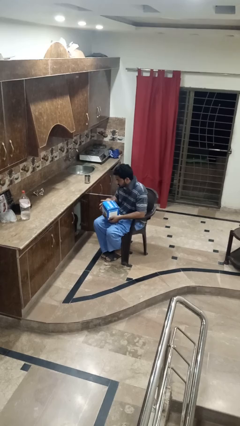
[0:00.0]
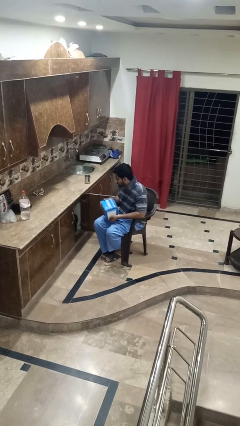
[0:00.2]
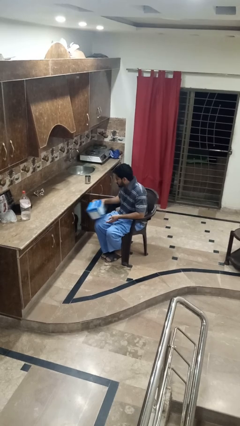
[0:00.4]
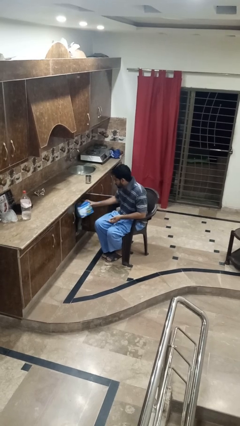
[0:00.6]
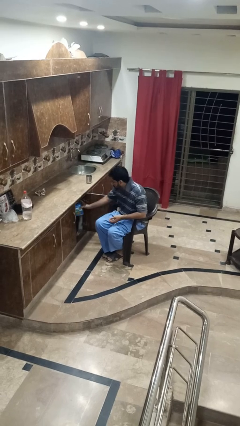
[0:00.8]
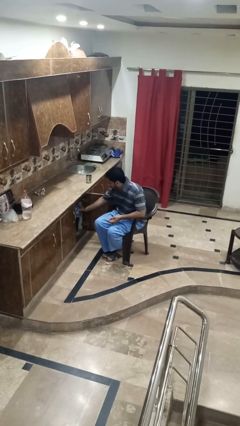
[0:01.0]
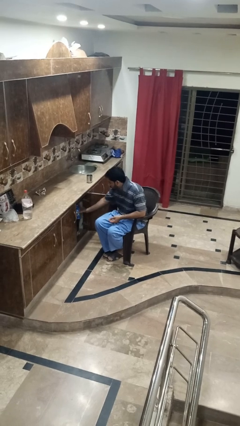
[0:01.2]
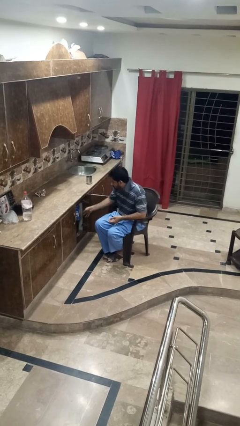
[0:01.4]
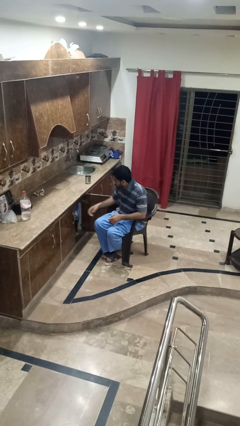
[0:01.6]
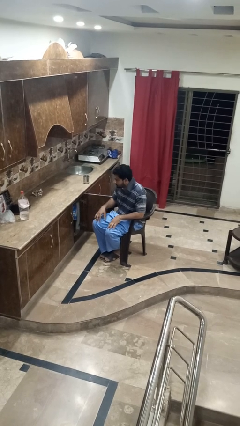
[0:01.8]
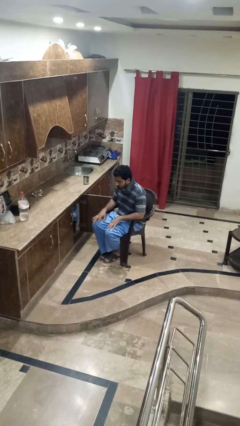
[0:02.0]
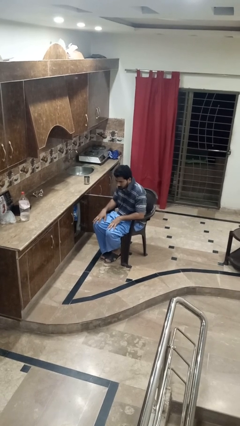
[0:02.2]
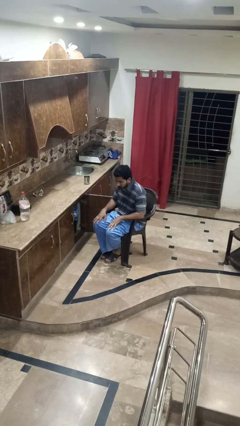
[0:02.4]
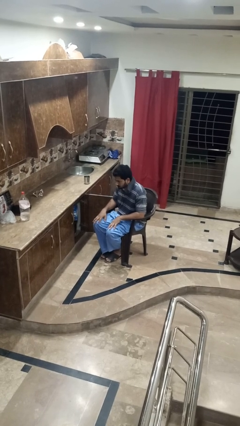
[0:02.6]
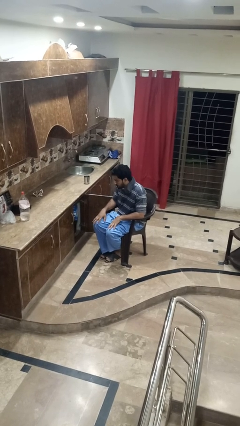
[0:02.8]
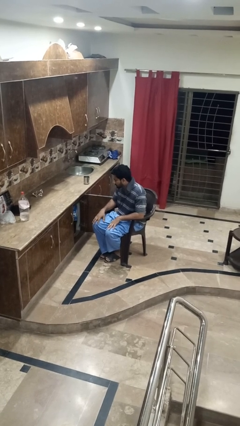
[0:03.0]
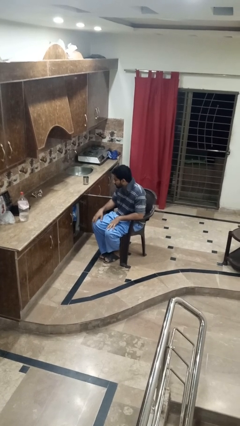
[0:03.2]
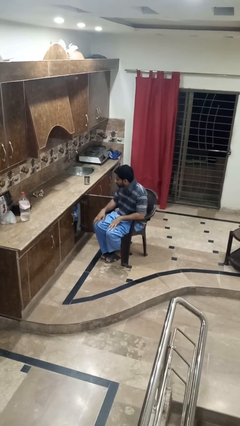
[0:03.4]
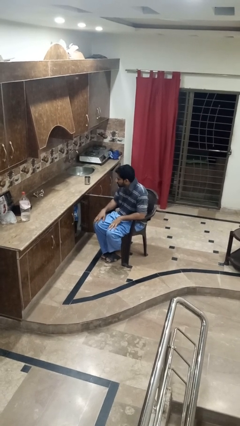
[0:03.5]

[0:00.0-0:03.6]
person puts down object into cabinet

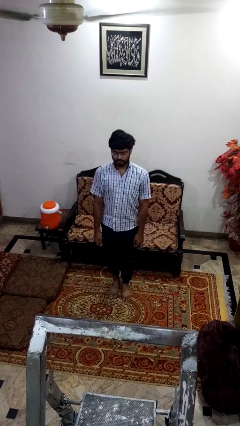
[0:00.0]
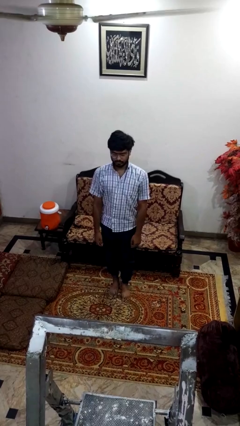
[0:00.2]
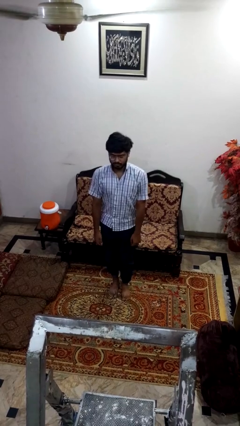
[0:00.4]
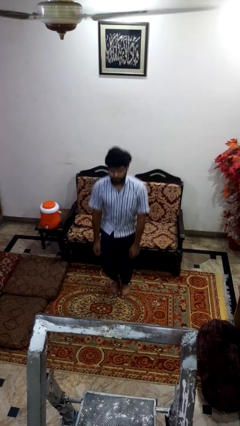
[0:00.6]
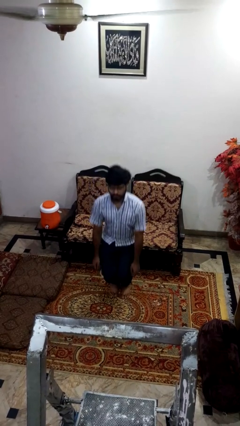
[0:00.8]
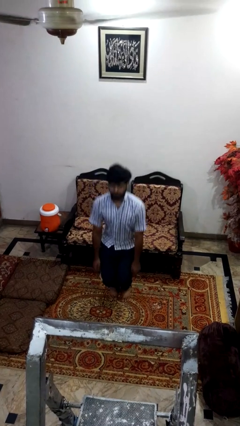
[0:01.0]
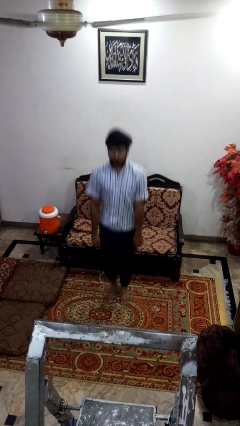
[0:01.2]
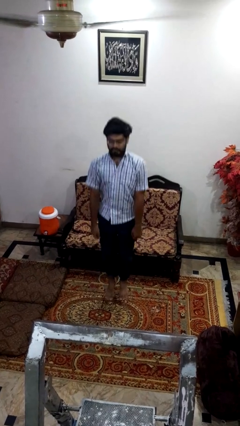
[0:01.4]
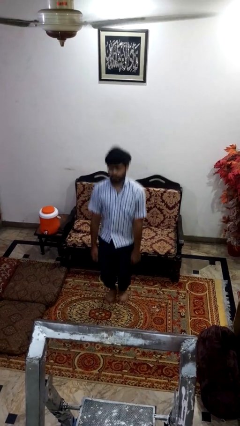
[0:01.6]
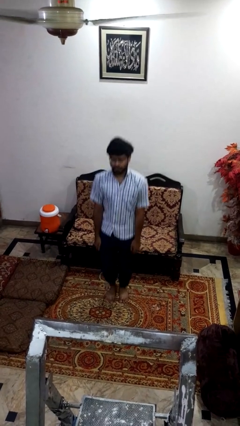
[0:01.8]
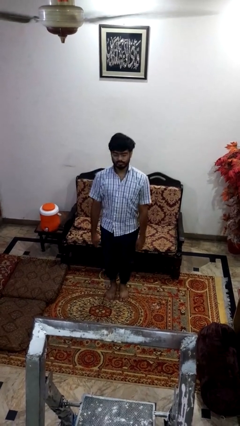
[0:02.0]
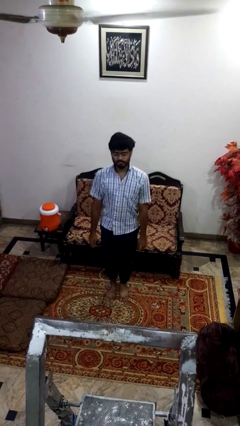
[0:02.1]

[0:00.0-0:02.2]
person jumps

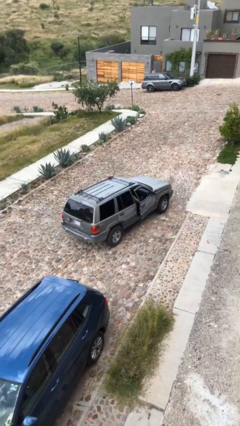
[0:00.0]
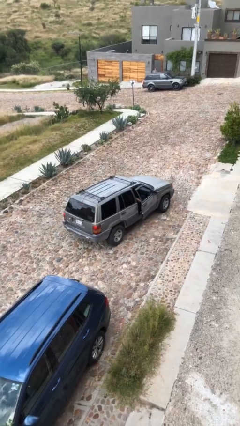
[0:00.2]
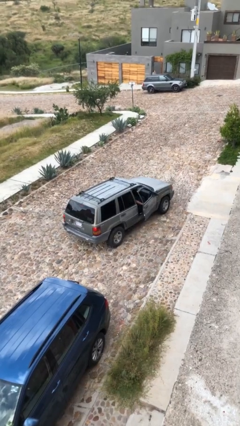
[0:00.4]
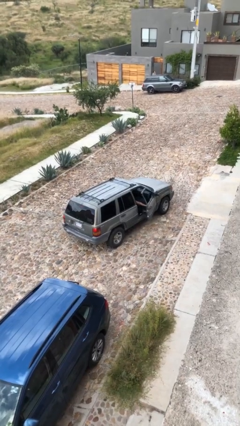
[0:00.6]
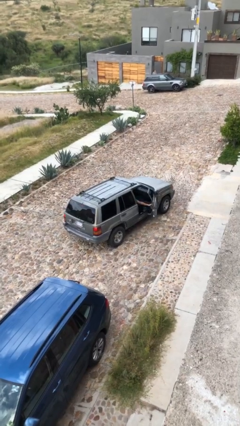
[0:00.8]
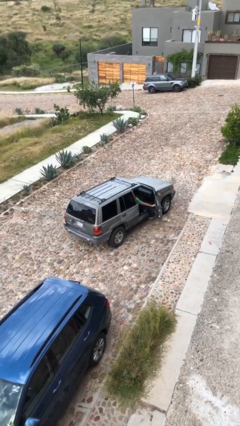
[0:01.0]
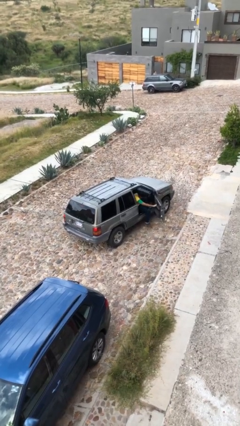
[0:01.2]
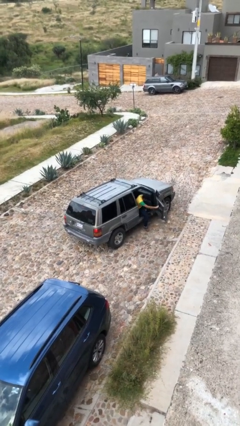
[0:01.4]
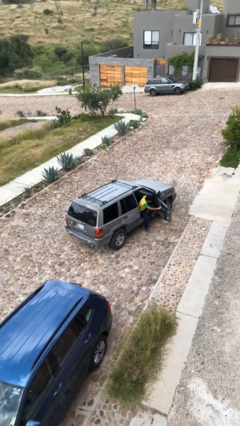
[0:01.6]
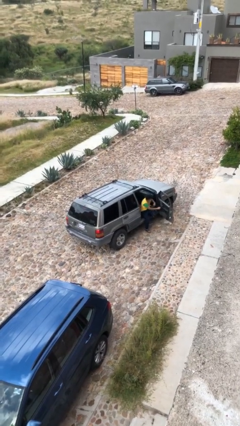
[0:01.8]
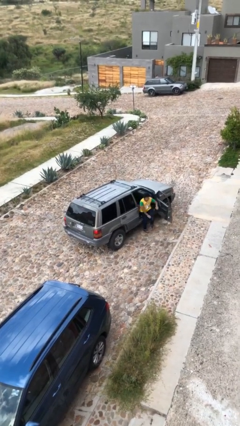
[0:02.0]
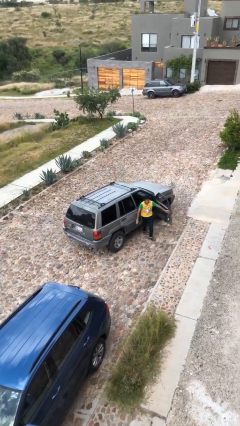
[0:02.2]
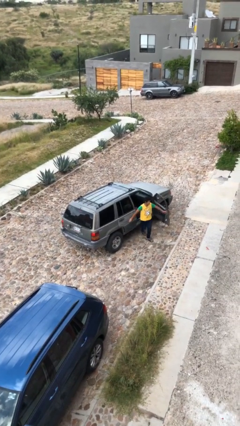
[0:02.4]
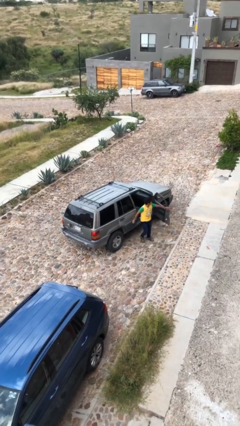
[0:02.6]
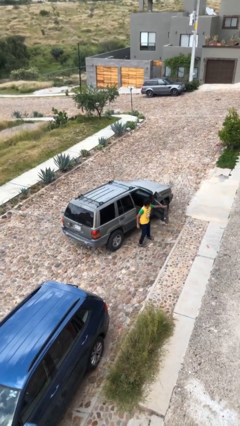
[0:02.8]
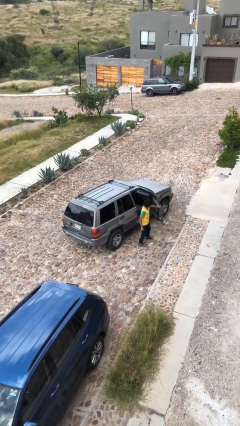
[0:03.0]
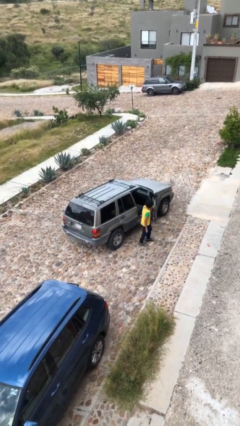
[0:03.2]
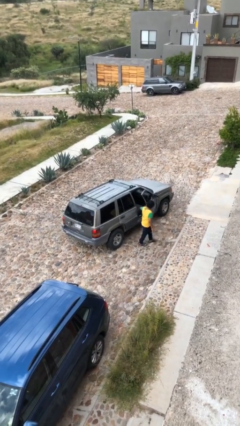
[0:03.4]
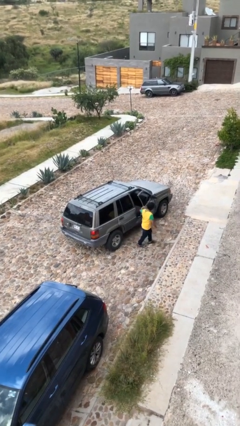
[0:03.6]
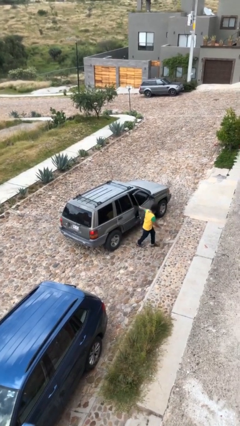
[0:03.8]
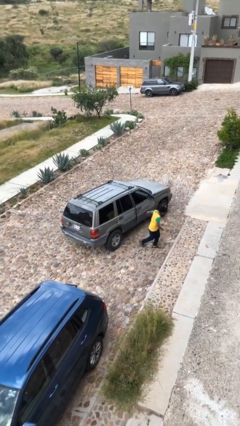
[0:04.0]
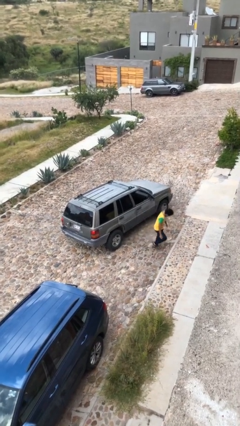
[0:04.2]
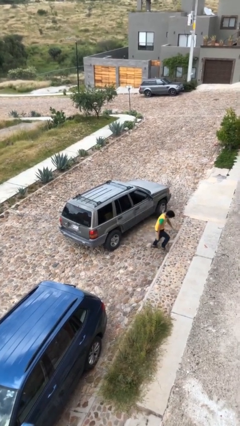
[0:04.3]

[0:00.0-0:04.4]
car drops off person

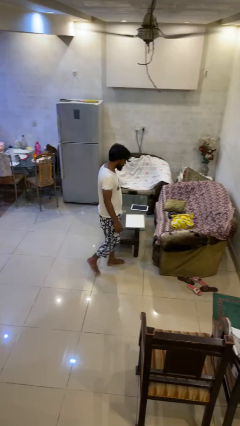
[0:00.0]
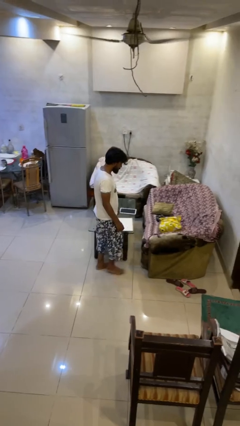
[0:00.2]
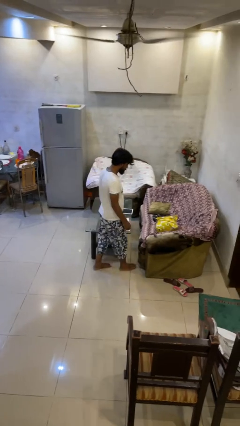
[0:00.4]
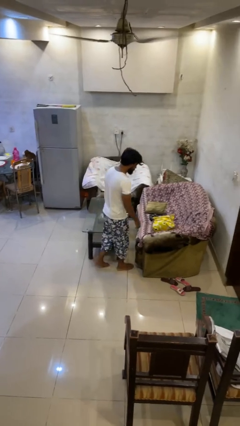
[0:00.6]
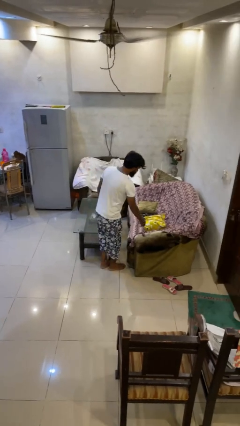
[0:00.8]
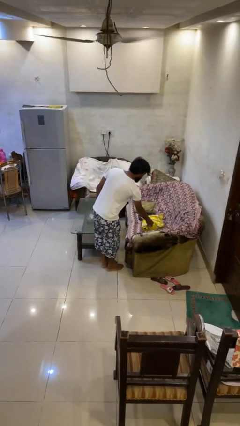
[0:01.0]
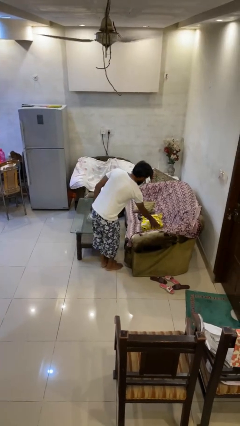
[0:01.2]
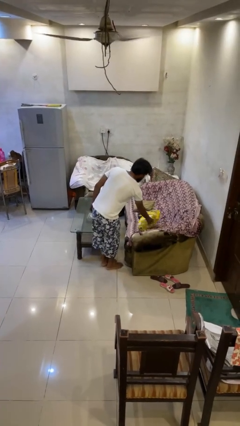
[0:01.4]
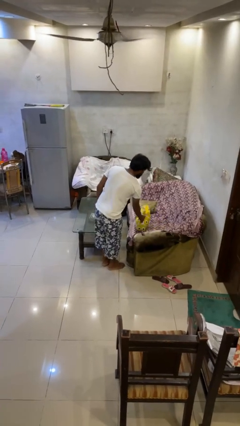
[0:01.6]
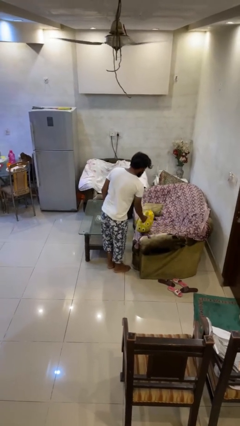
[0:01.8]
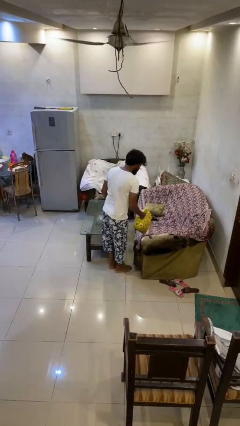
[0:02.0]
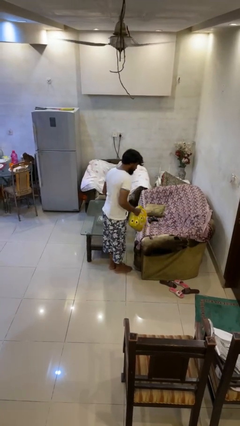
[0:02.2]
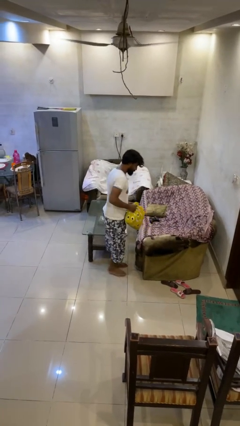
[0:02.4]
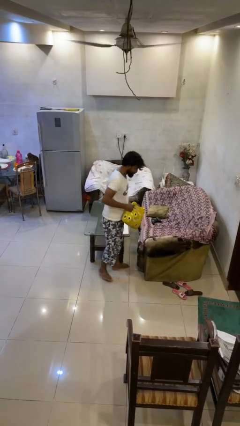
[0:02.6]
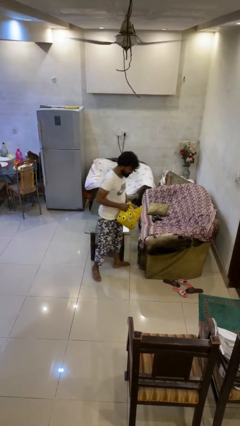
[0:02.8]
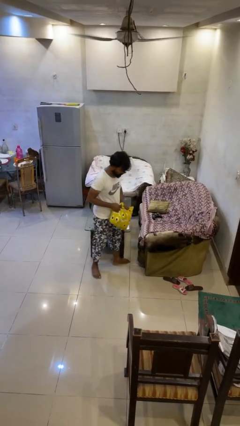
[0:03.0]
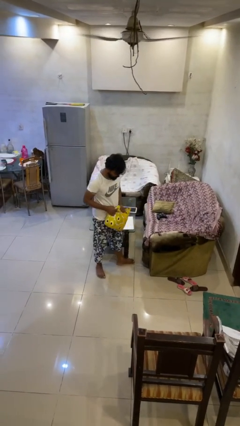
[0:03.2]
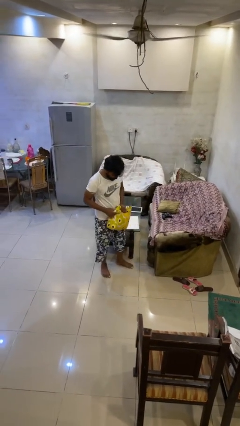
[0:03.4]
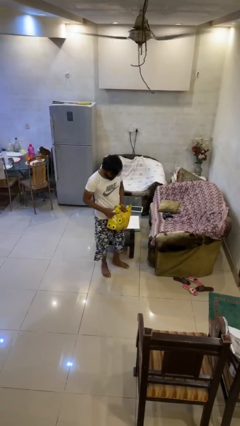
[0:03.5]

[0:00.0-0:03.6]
person picks up object from couch

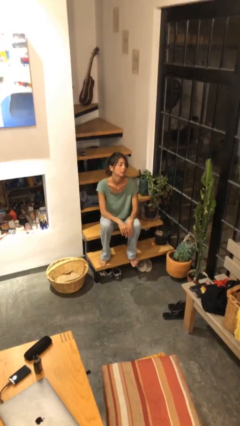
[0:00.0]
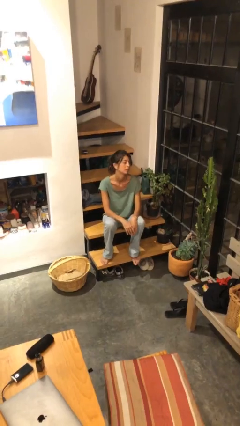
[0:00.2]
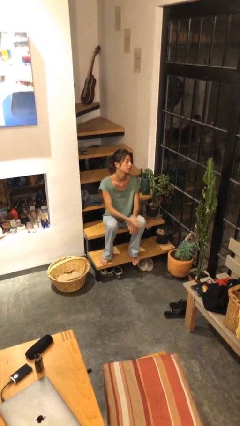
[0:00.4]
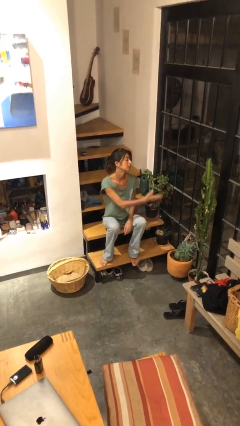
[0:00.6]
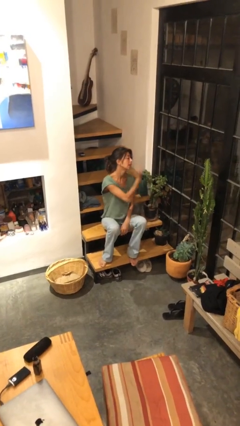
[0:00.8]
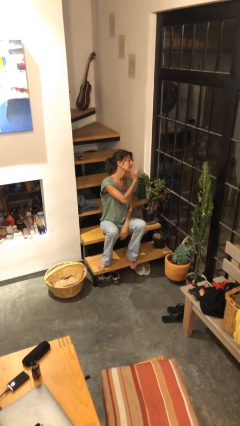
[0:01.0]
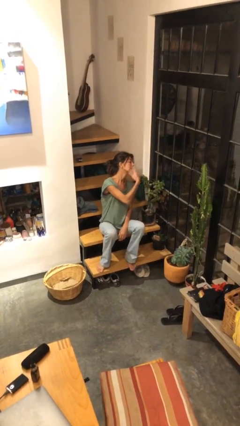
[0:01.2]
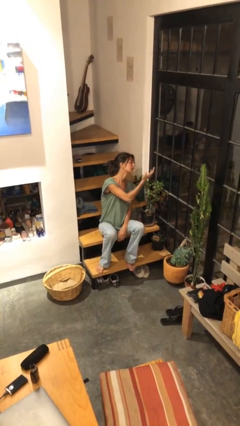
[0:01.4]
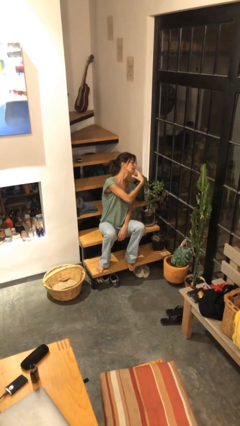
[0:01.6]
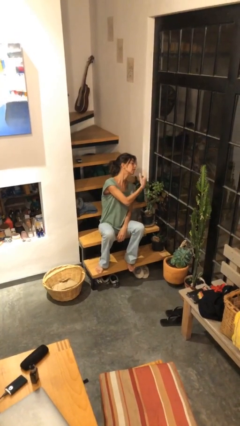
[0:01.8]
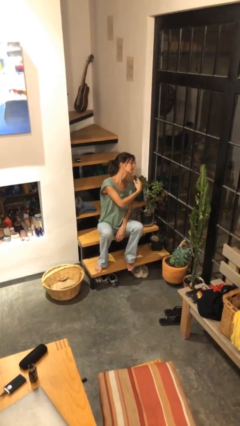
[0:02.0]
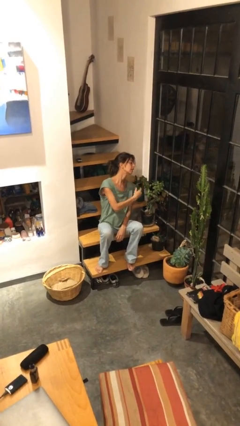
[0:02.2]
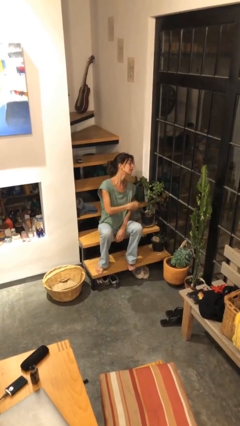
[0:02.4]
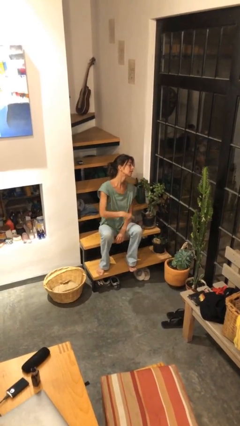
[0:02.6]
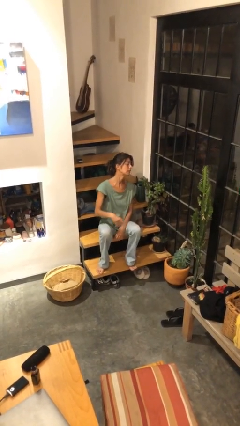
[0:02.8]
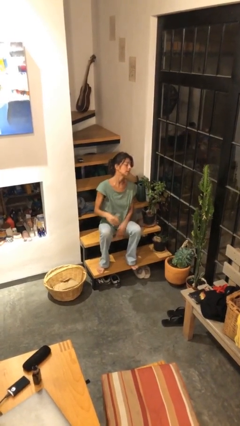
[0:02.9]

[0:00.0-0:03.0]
person gestures come here

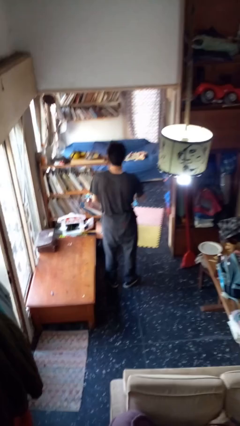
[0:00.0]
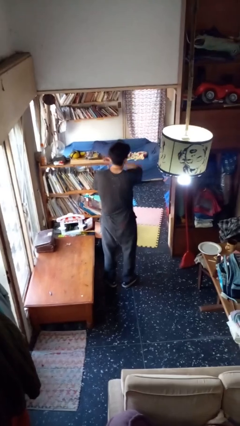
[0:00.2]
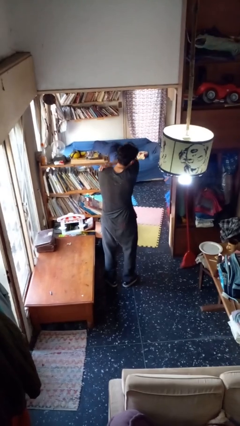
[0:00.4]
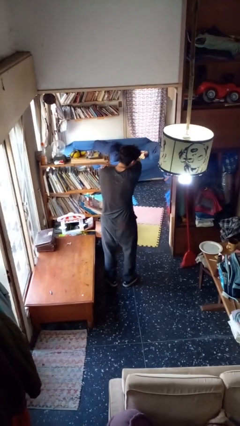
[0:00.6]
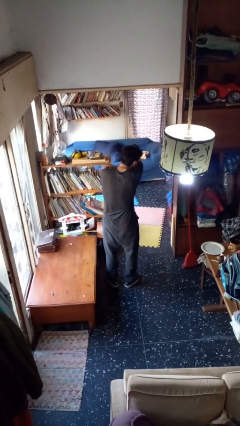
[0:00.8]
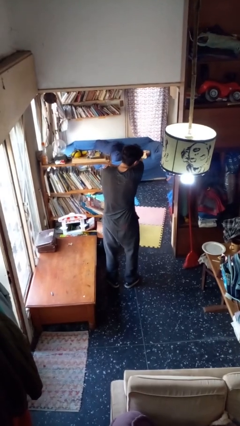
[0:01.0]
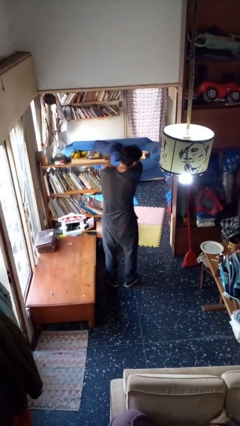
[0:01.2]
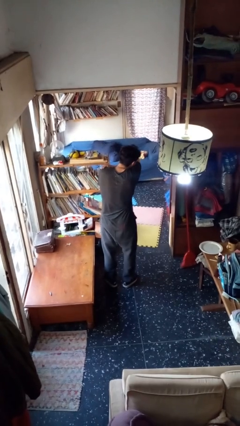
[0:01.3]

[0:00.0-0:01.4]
person sneezes into arm
